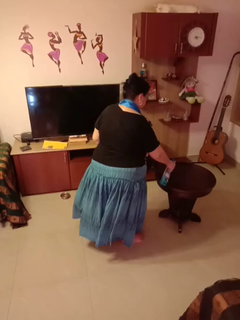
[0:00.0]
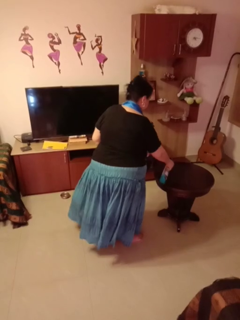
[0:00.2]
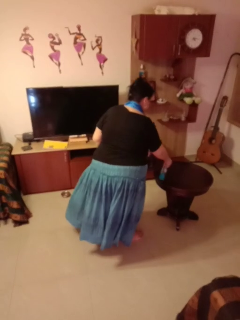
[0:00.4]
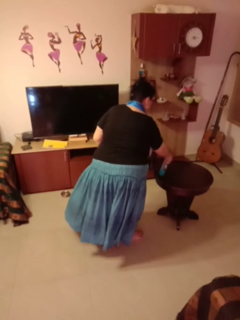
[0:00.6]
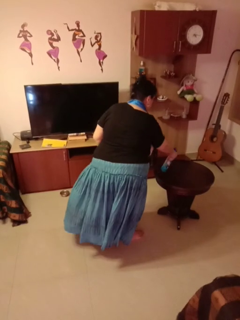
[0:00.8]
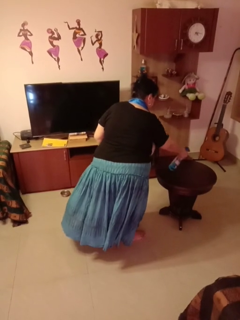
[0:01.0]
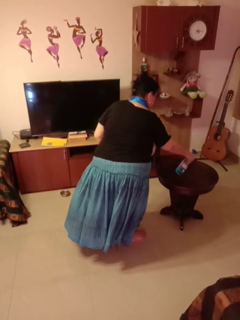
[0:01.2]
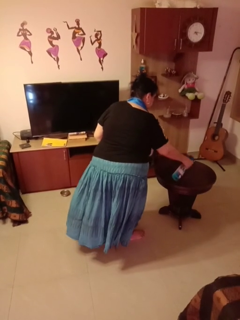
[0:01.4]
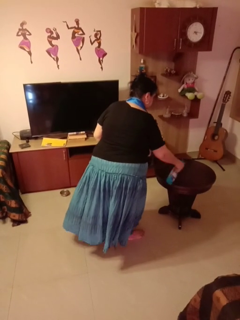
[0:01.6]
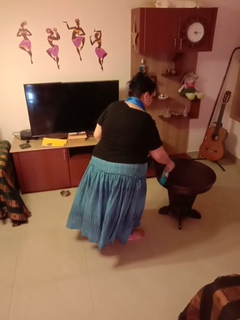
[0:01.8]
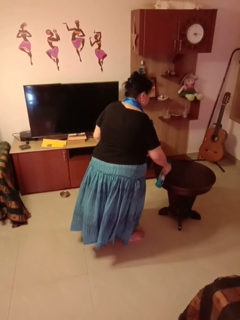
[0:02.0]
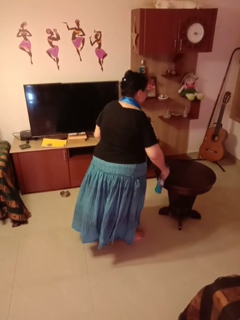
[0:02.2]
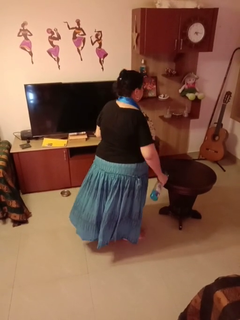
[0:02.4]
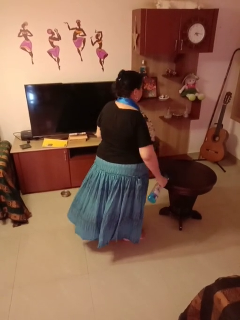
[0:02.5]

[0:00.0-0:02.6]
person sprays from bottle

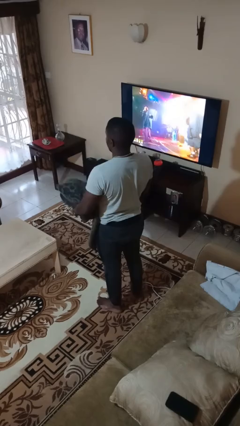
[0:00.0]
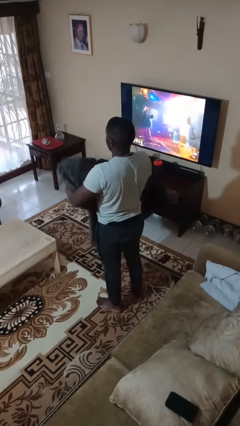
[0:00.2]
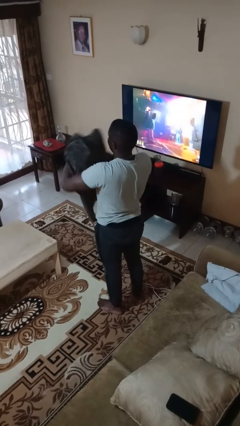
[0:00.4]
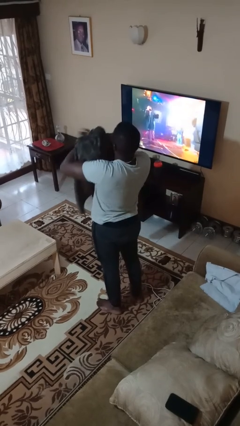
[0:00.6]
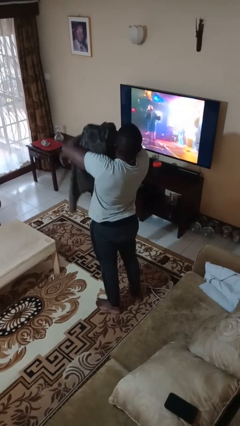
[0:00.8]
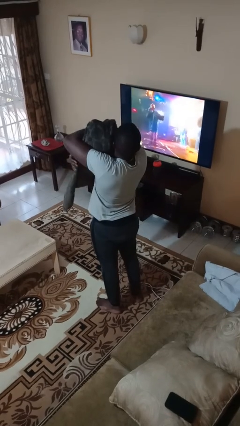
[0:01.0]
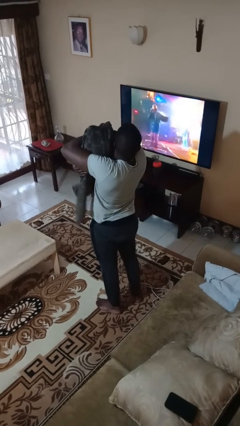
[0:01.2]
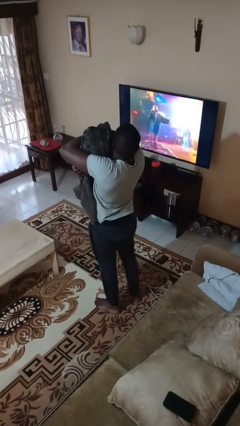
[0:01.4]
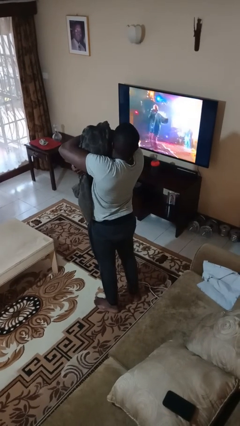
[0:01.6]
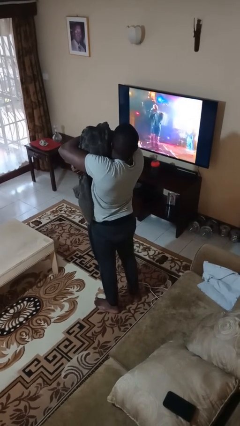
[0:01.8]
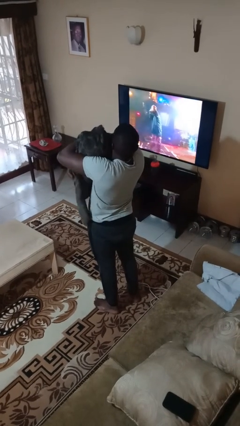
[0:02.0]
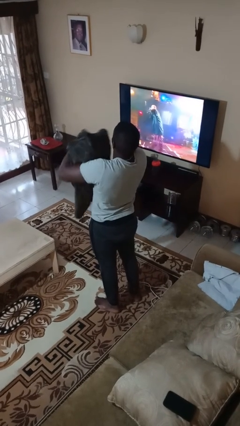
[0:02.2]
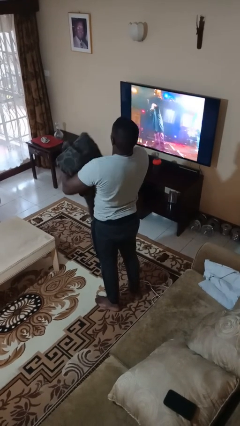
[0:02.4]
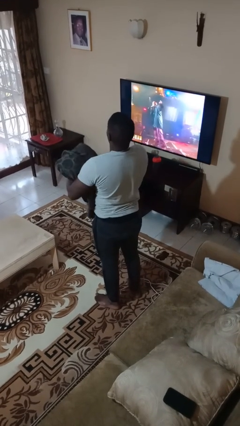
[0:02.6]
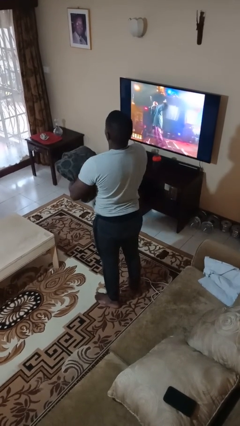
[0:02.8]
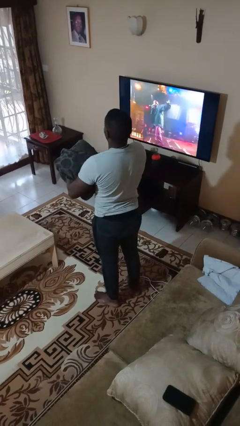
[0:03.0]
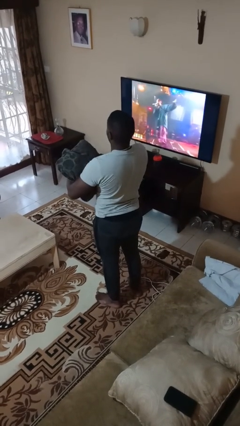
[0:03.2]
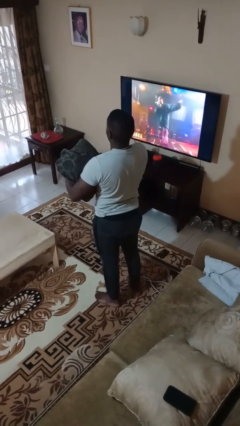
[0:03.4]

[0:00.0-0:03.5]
person hugs stuffed animal

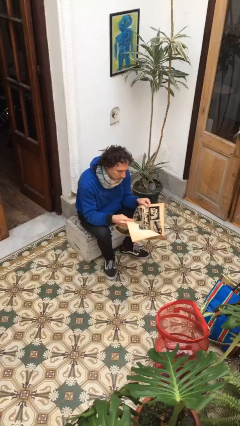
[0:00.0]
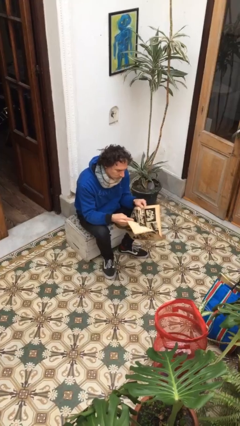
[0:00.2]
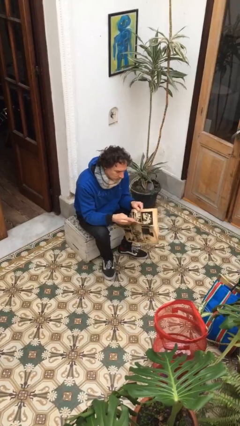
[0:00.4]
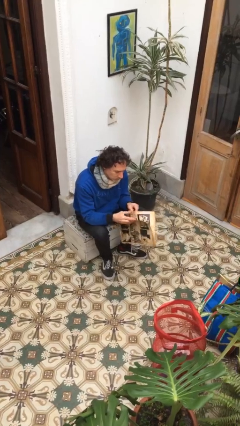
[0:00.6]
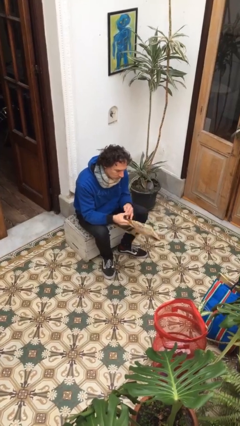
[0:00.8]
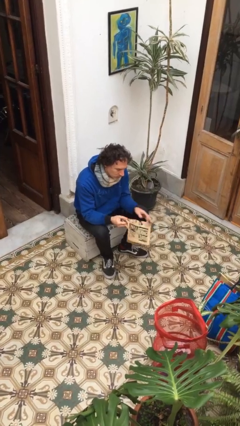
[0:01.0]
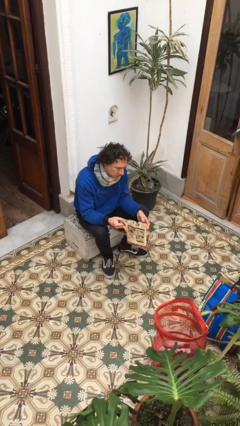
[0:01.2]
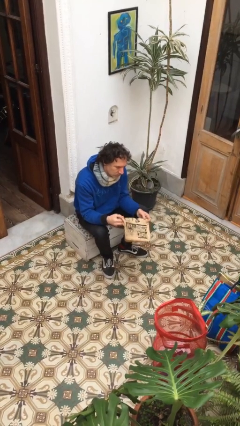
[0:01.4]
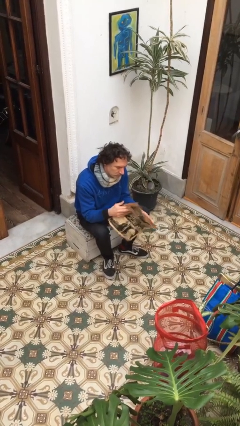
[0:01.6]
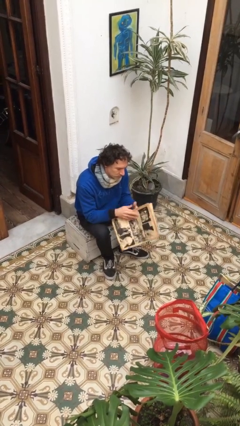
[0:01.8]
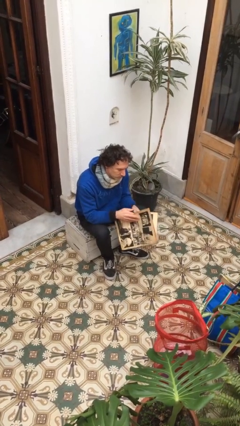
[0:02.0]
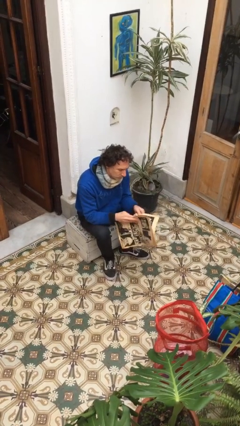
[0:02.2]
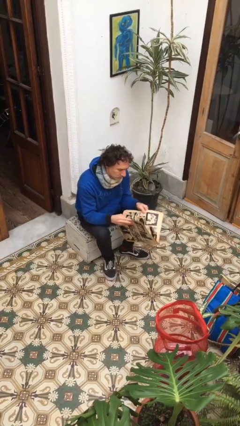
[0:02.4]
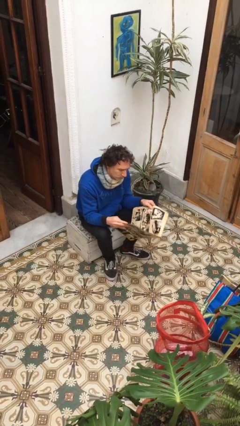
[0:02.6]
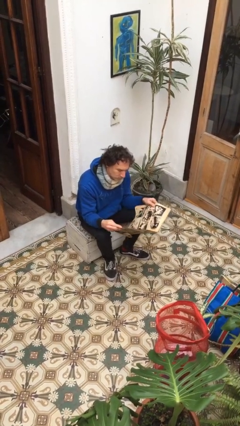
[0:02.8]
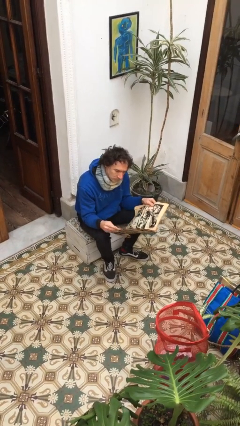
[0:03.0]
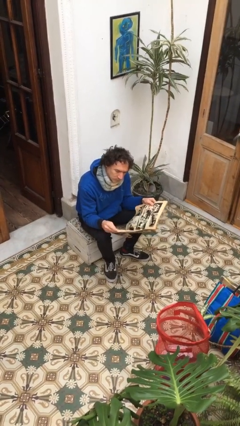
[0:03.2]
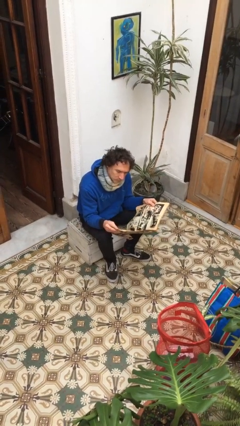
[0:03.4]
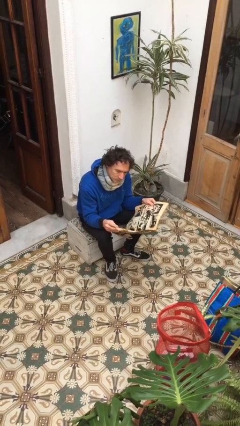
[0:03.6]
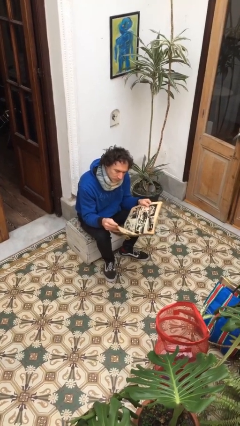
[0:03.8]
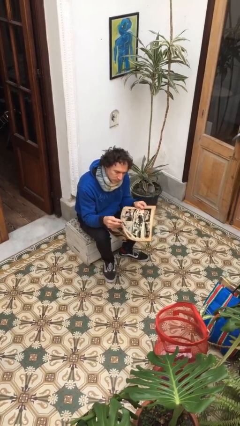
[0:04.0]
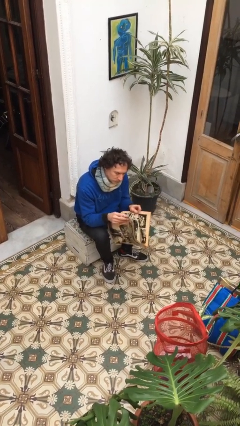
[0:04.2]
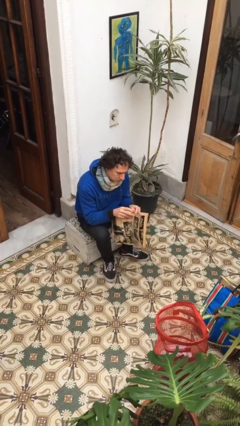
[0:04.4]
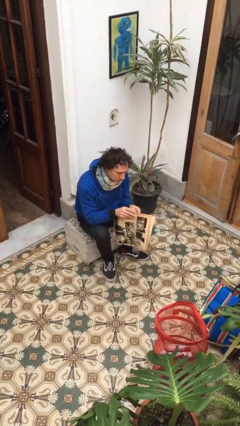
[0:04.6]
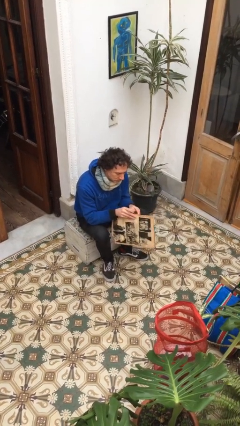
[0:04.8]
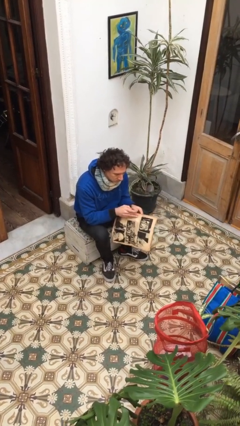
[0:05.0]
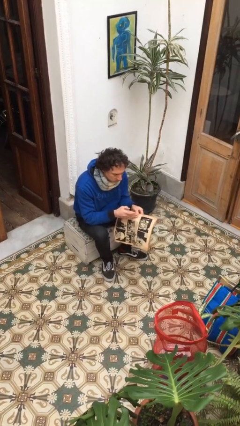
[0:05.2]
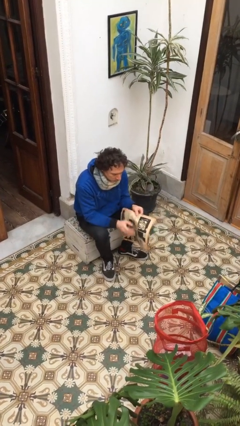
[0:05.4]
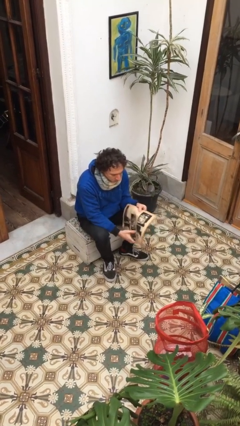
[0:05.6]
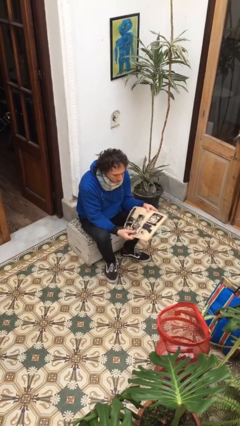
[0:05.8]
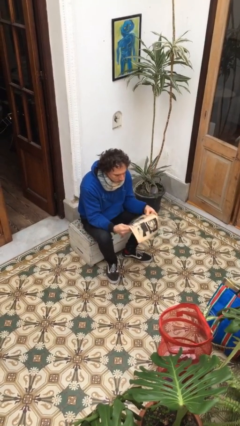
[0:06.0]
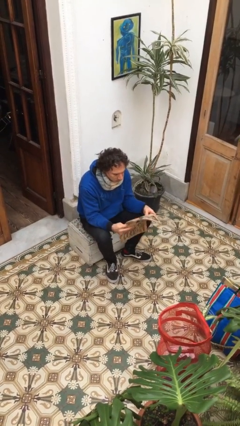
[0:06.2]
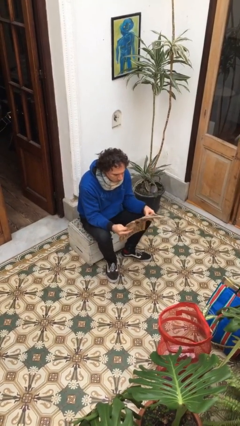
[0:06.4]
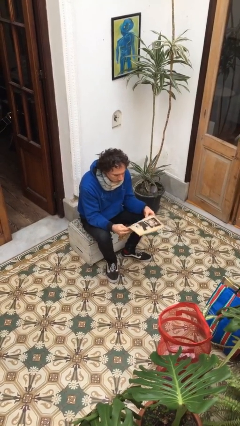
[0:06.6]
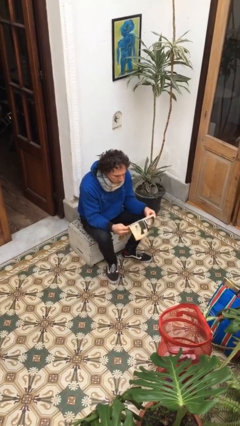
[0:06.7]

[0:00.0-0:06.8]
person reads newspaper

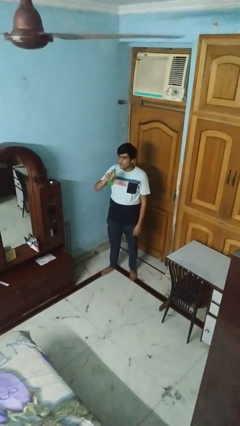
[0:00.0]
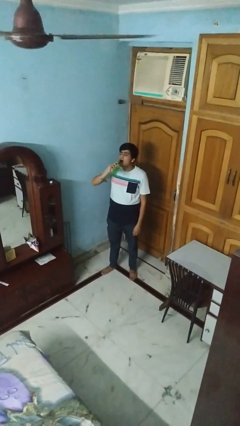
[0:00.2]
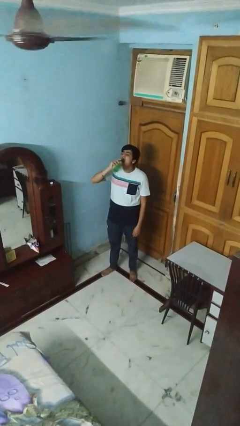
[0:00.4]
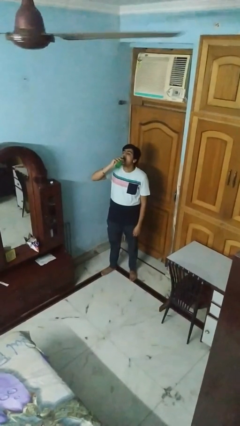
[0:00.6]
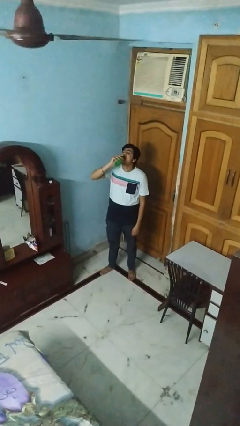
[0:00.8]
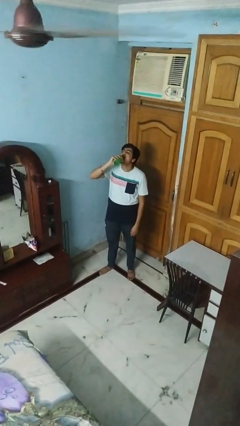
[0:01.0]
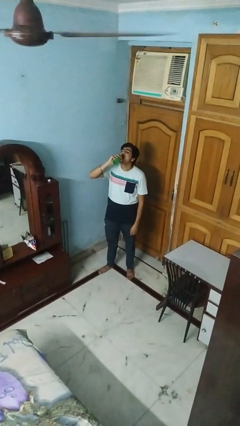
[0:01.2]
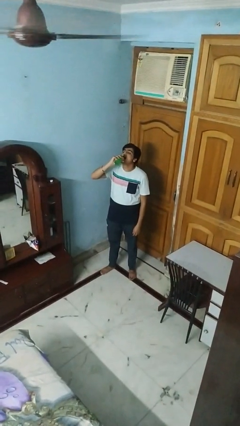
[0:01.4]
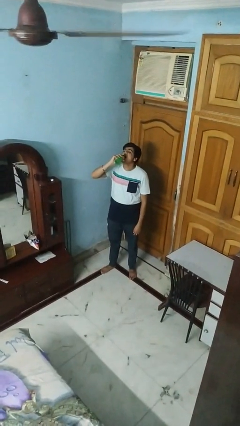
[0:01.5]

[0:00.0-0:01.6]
person drinks from bottle

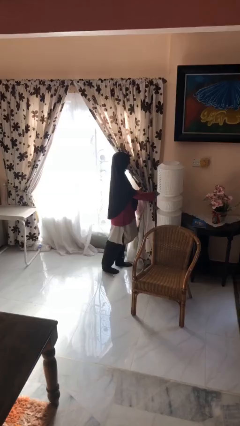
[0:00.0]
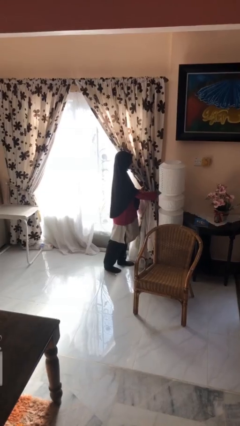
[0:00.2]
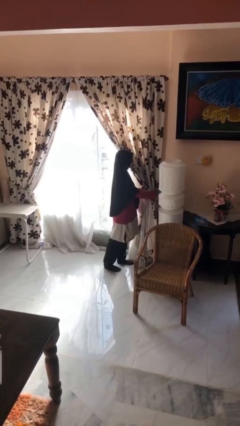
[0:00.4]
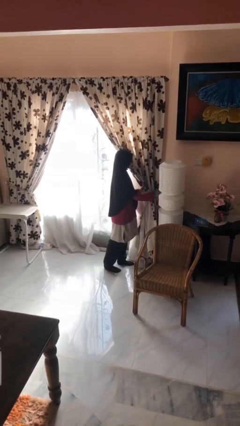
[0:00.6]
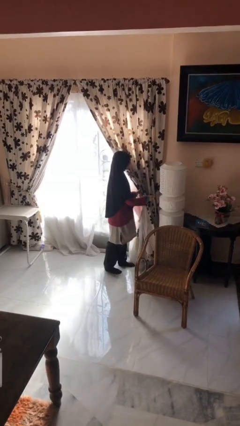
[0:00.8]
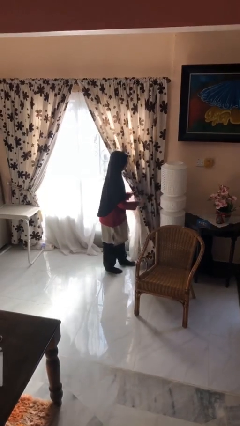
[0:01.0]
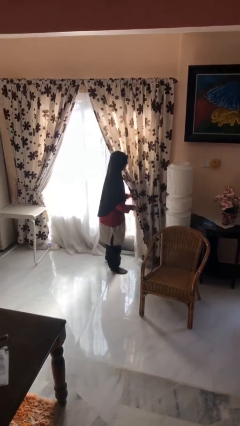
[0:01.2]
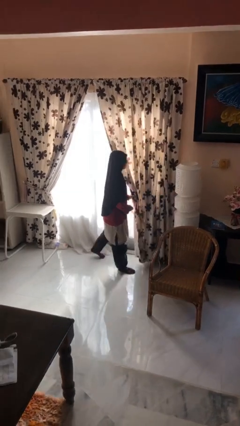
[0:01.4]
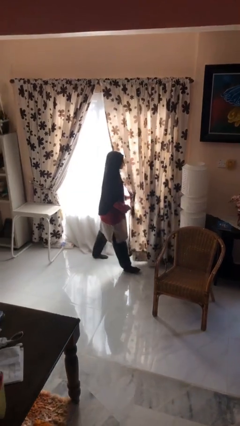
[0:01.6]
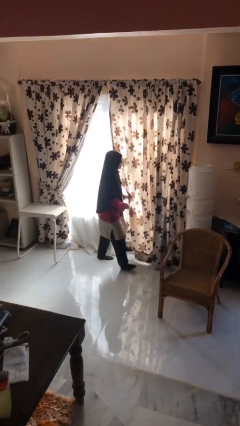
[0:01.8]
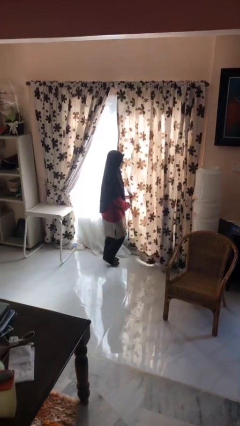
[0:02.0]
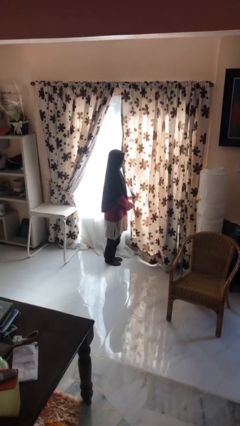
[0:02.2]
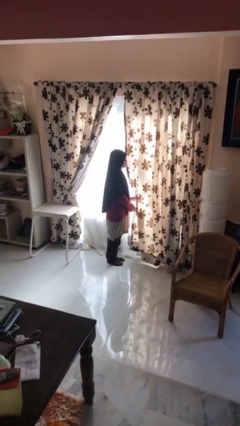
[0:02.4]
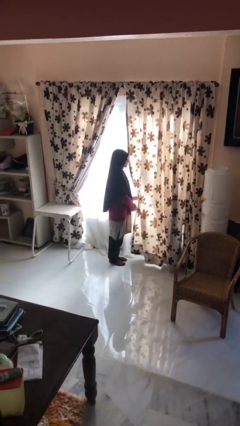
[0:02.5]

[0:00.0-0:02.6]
person closes curtains

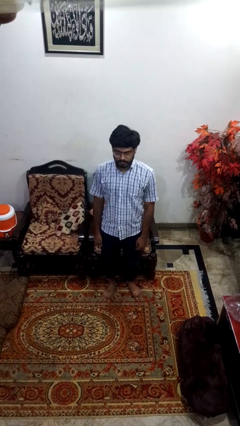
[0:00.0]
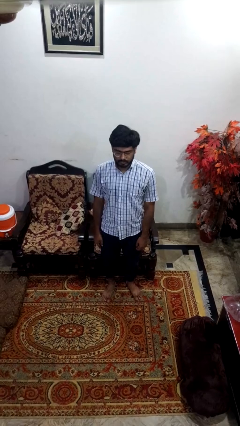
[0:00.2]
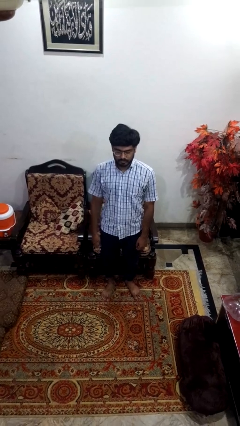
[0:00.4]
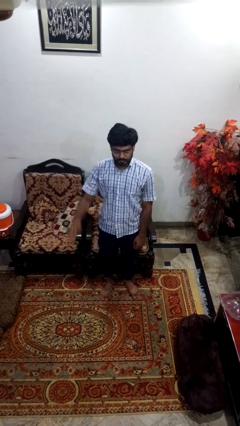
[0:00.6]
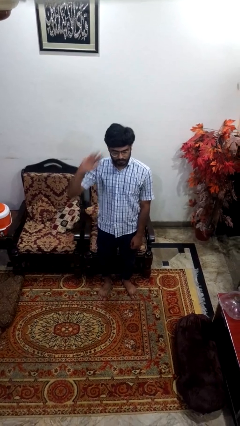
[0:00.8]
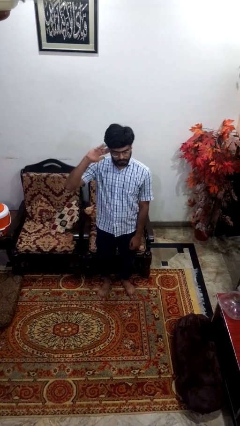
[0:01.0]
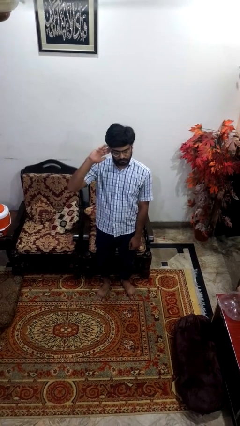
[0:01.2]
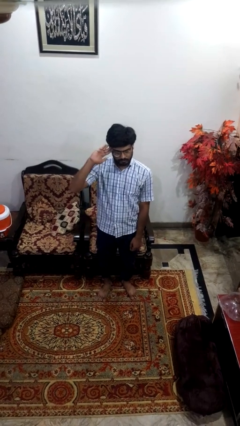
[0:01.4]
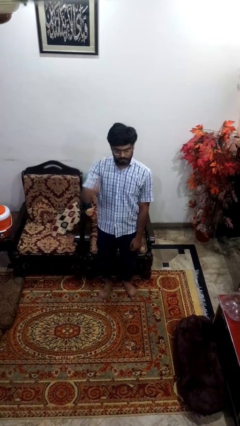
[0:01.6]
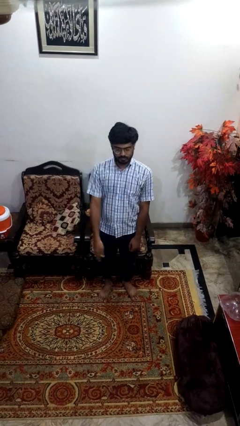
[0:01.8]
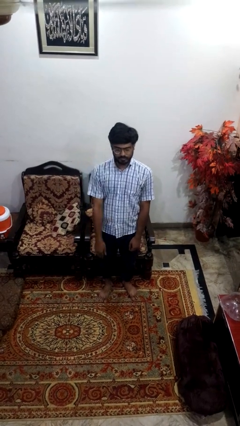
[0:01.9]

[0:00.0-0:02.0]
person salutes
